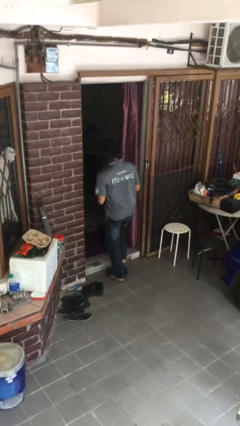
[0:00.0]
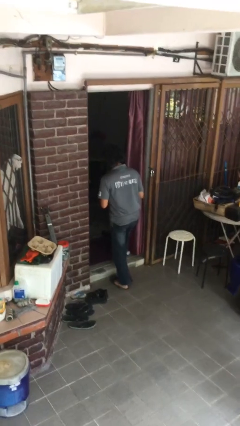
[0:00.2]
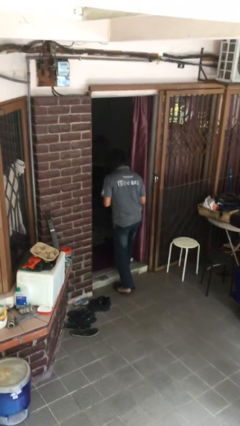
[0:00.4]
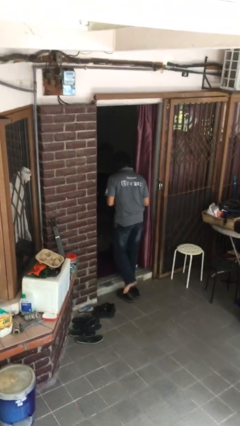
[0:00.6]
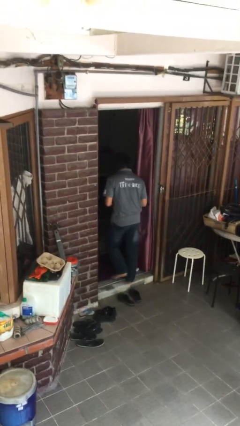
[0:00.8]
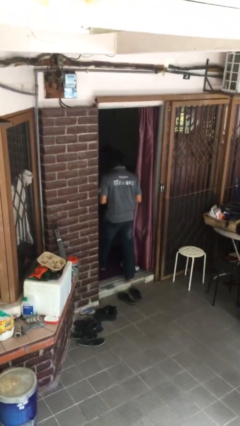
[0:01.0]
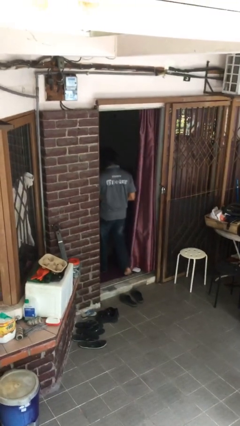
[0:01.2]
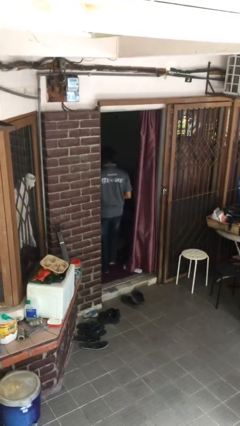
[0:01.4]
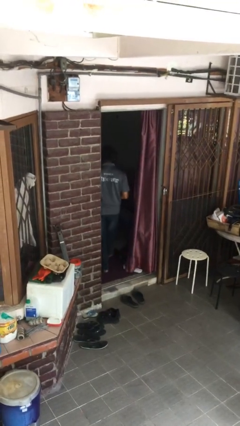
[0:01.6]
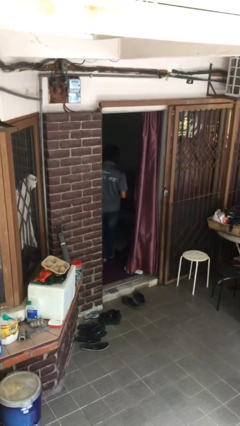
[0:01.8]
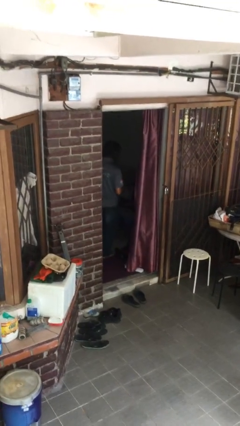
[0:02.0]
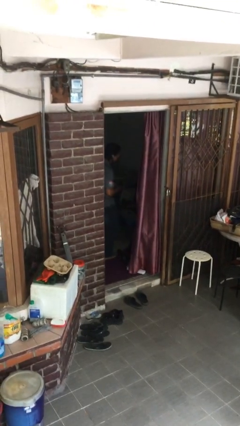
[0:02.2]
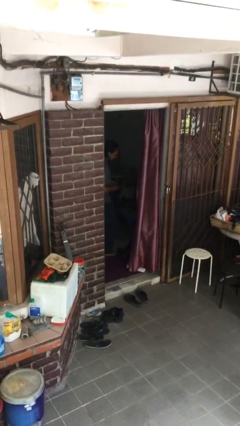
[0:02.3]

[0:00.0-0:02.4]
person exits scene through structure

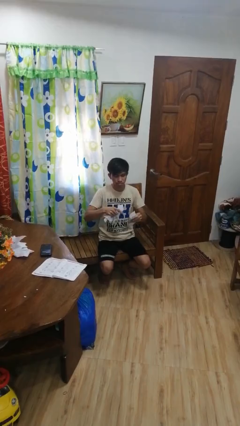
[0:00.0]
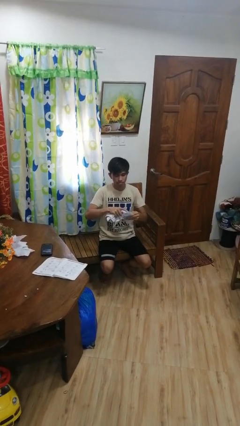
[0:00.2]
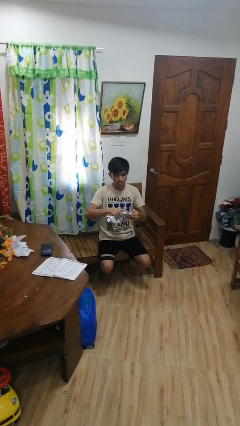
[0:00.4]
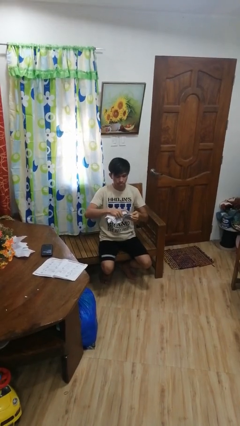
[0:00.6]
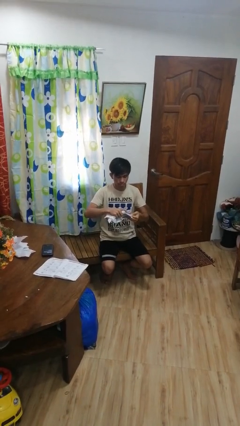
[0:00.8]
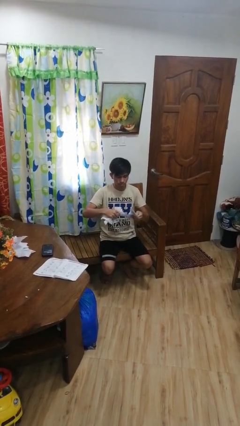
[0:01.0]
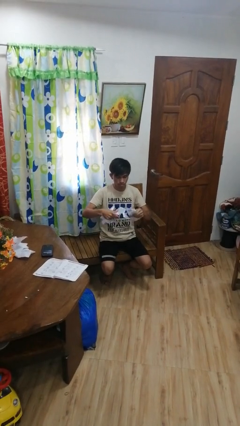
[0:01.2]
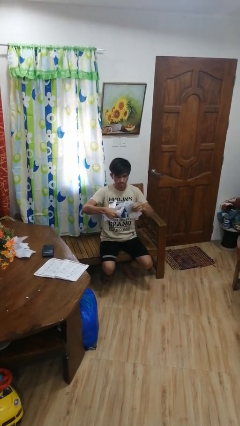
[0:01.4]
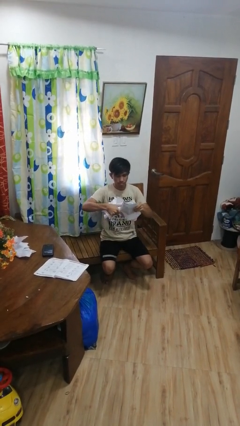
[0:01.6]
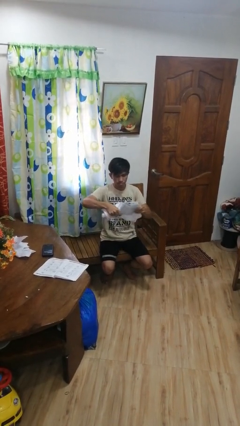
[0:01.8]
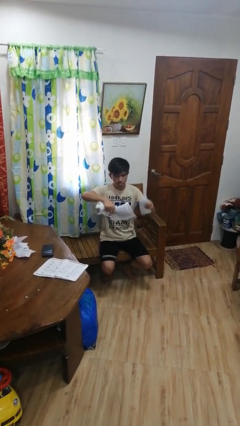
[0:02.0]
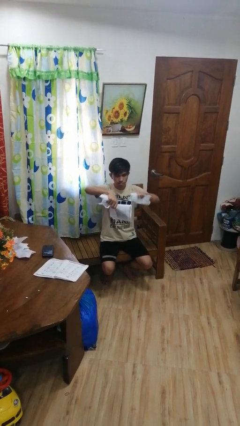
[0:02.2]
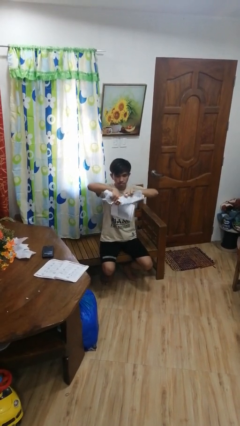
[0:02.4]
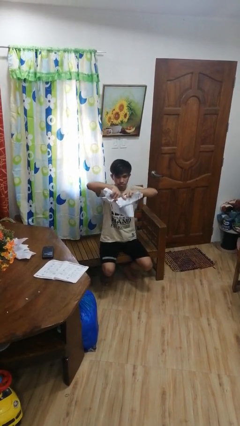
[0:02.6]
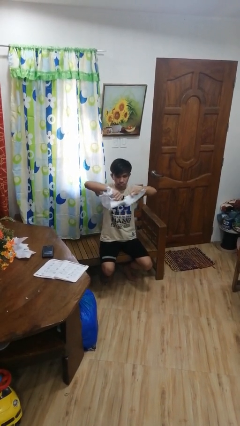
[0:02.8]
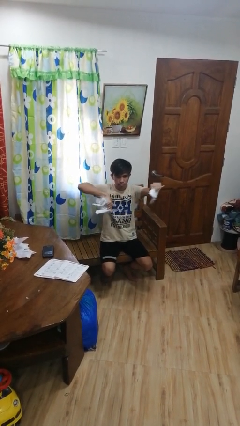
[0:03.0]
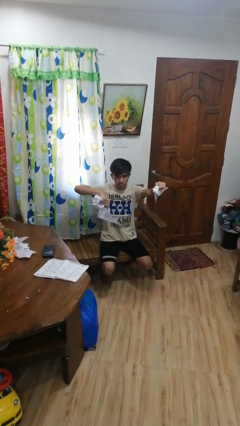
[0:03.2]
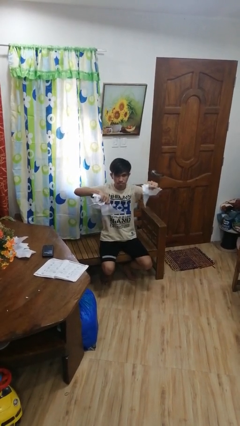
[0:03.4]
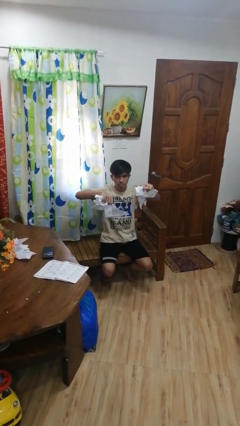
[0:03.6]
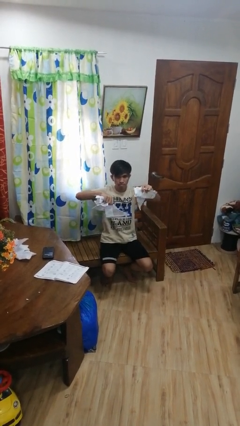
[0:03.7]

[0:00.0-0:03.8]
person tears paper

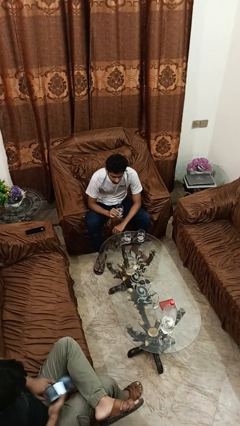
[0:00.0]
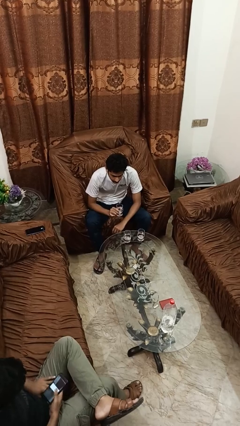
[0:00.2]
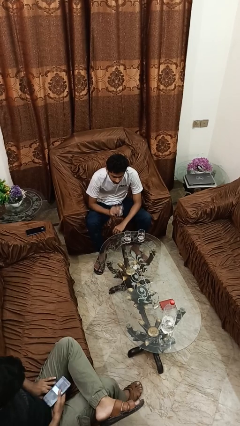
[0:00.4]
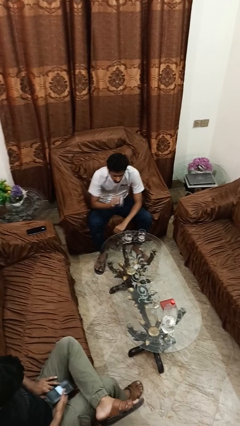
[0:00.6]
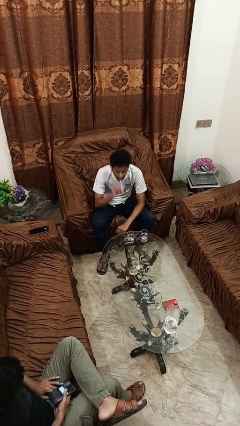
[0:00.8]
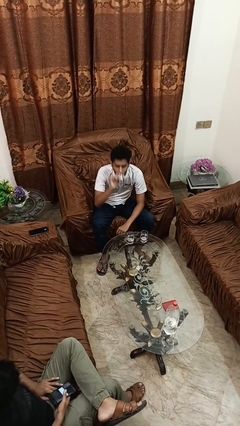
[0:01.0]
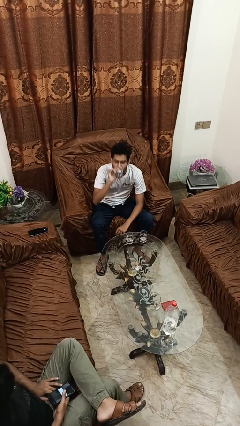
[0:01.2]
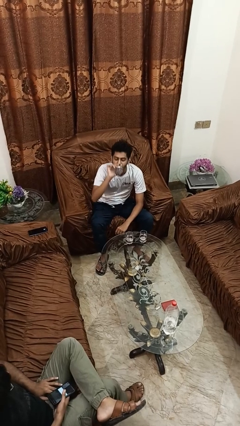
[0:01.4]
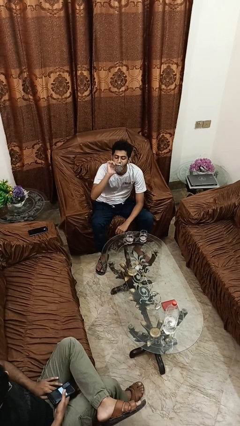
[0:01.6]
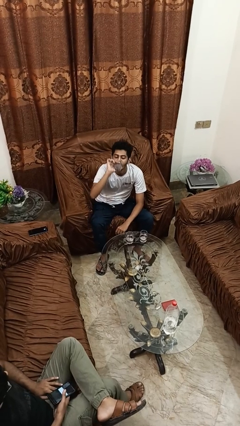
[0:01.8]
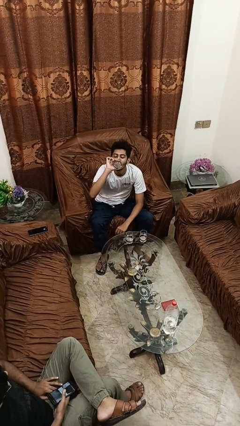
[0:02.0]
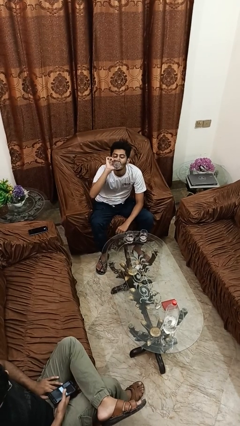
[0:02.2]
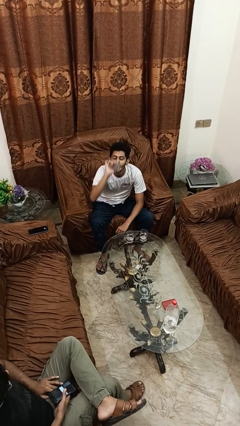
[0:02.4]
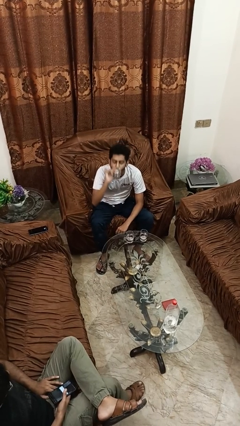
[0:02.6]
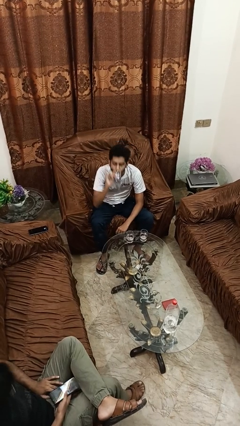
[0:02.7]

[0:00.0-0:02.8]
person drinks from shotglass

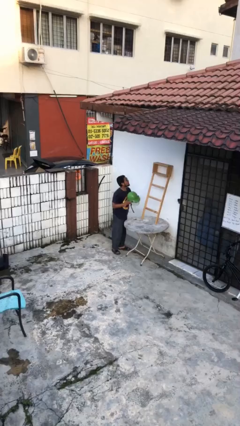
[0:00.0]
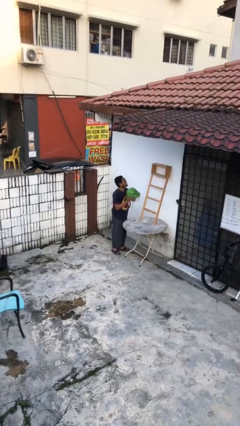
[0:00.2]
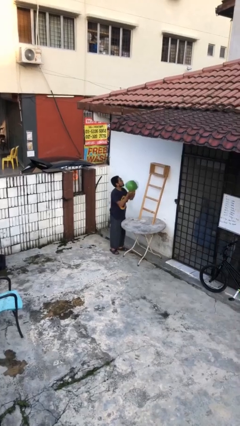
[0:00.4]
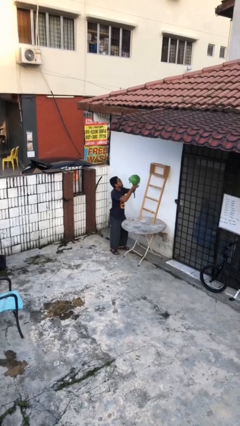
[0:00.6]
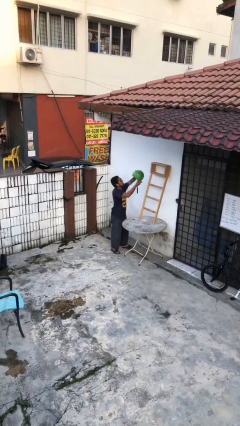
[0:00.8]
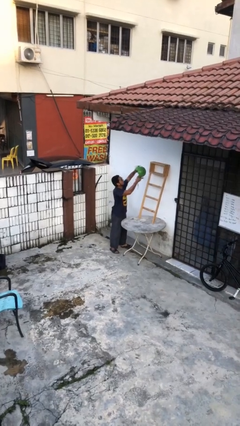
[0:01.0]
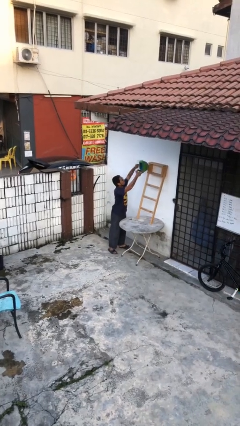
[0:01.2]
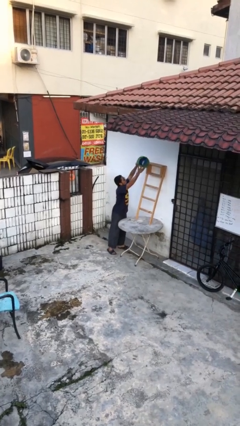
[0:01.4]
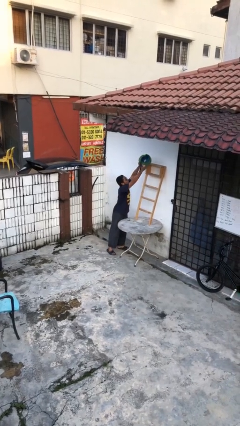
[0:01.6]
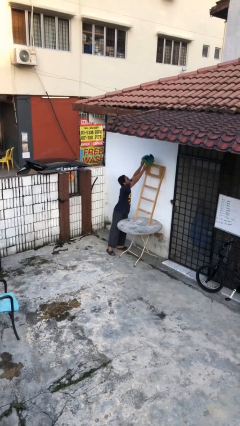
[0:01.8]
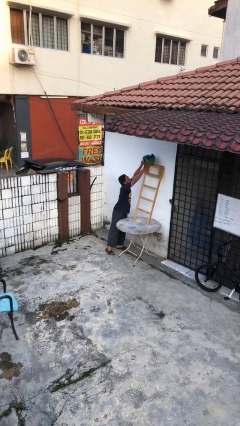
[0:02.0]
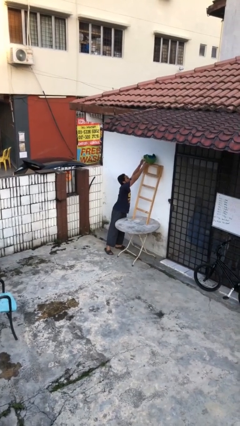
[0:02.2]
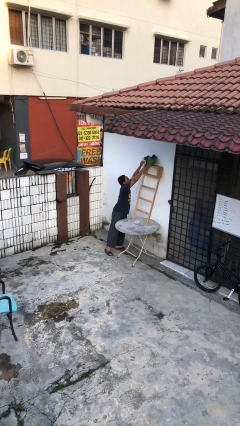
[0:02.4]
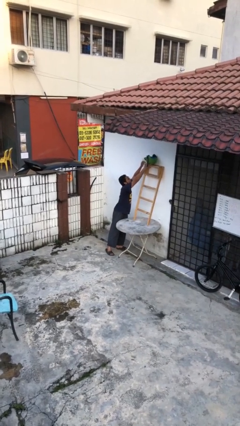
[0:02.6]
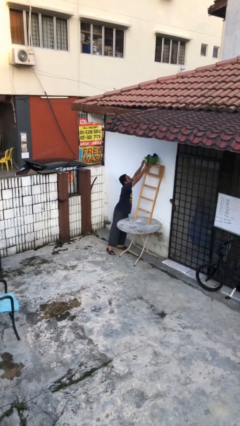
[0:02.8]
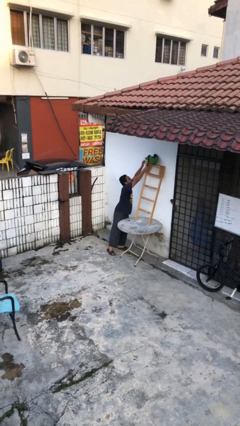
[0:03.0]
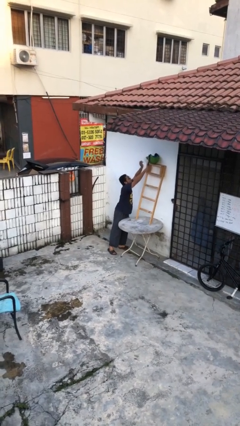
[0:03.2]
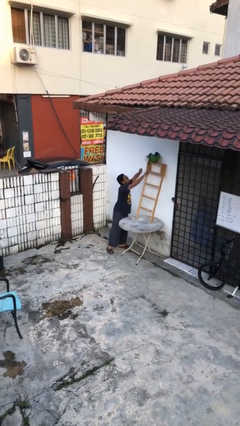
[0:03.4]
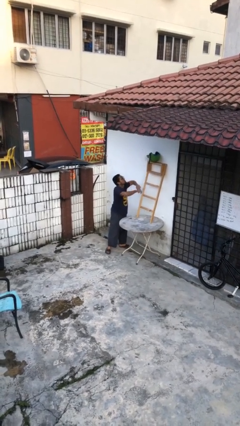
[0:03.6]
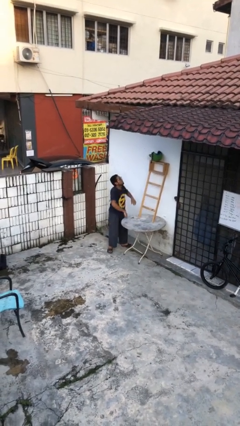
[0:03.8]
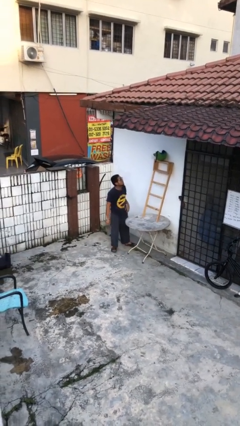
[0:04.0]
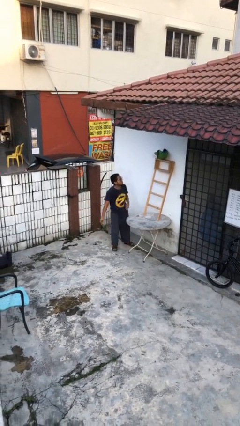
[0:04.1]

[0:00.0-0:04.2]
person puts down object on shelf

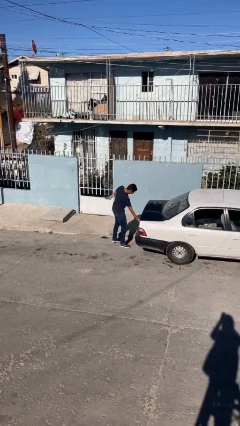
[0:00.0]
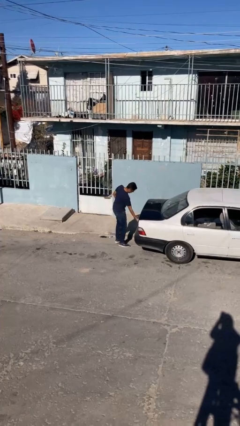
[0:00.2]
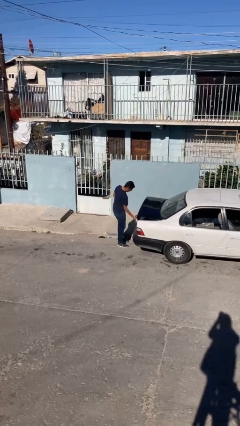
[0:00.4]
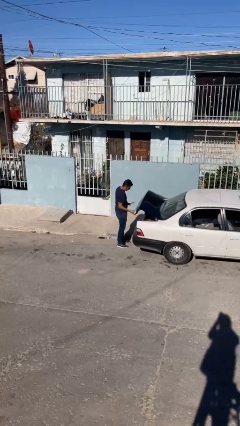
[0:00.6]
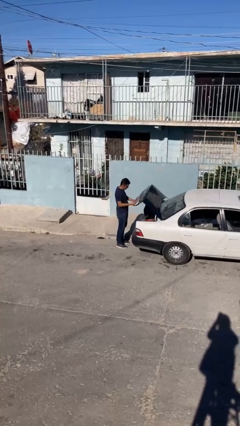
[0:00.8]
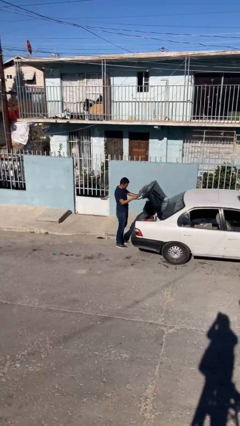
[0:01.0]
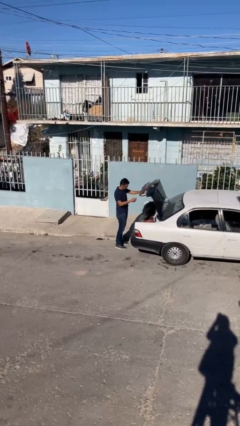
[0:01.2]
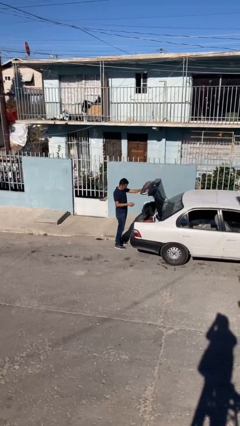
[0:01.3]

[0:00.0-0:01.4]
person opens car trunk

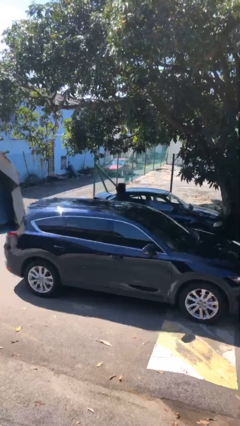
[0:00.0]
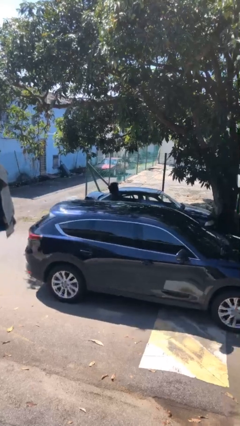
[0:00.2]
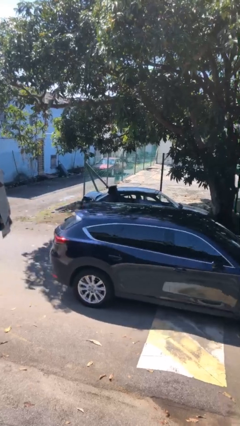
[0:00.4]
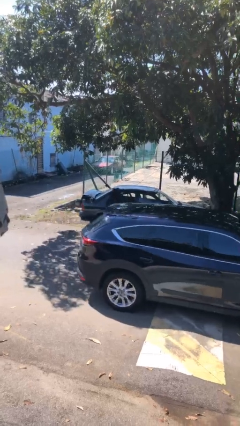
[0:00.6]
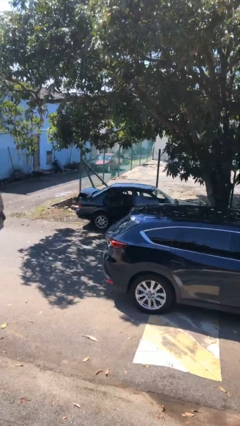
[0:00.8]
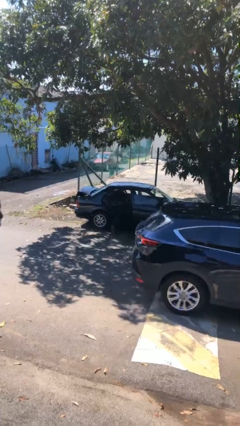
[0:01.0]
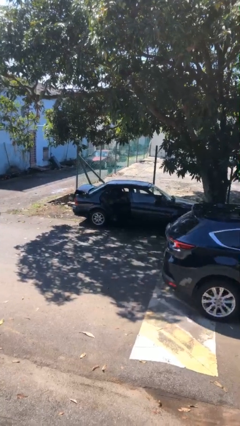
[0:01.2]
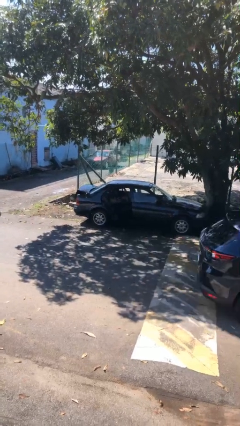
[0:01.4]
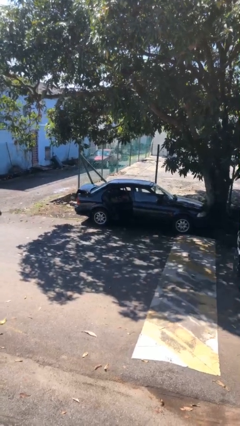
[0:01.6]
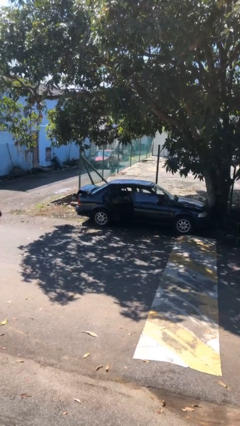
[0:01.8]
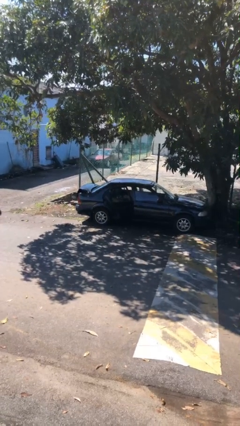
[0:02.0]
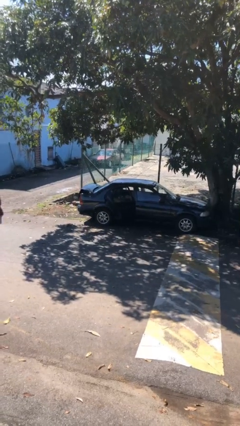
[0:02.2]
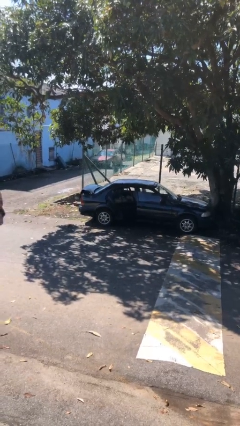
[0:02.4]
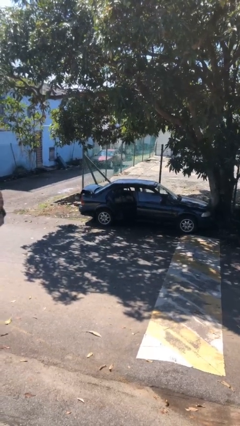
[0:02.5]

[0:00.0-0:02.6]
person enters car

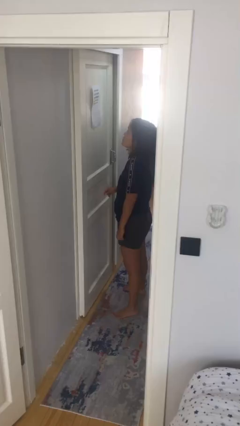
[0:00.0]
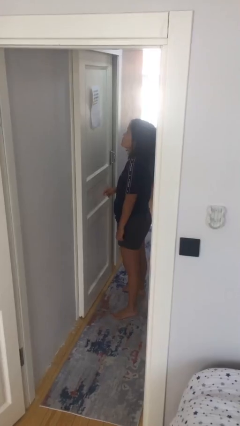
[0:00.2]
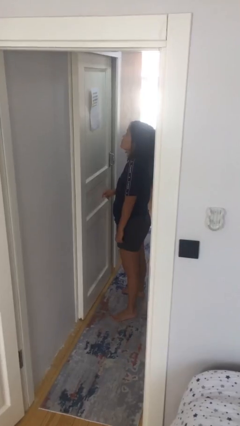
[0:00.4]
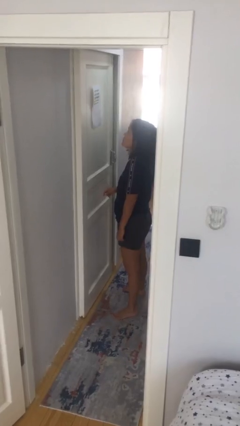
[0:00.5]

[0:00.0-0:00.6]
person opens sliding door
